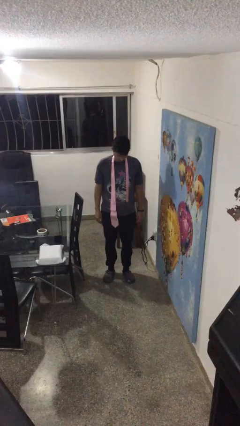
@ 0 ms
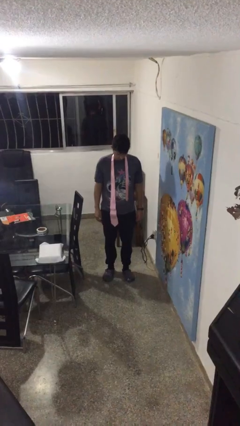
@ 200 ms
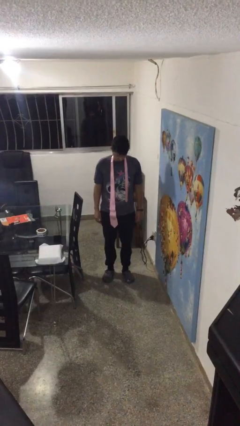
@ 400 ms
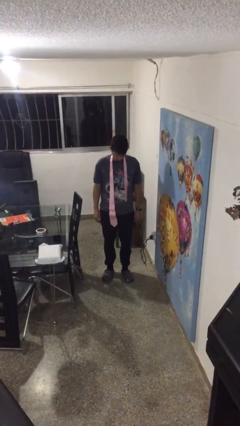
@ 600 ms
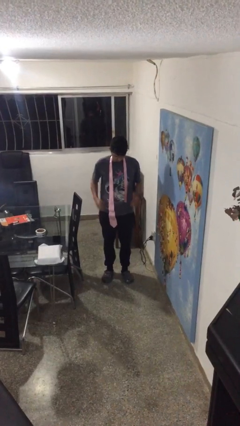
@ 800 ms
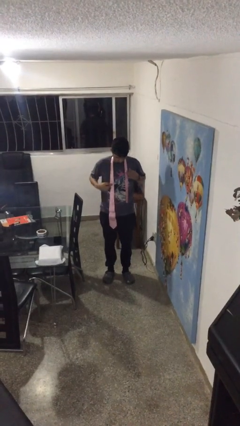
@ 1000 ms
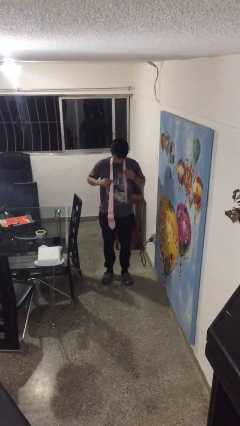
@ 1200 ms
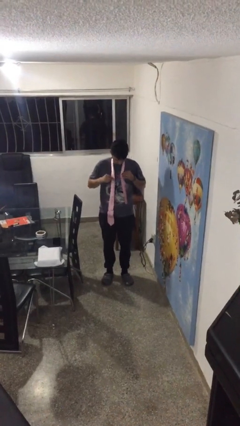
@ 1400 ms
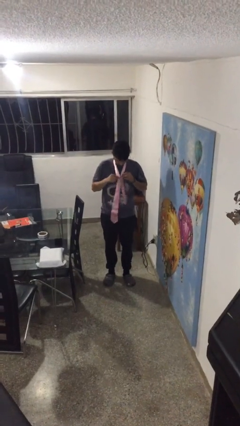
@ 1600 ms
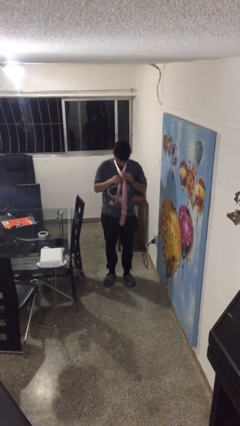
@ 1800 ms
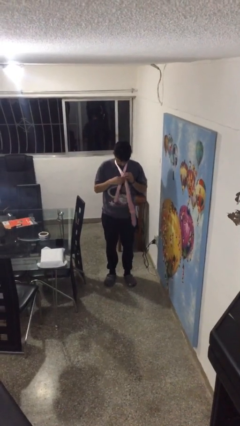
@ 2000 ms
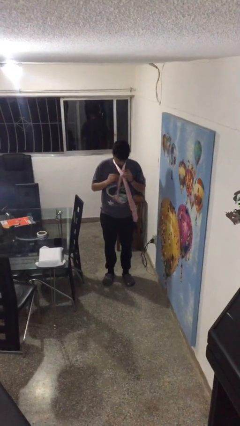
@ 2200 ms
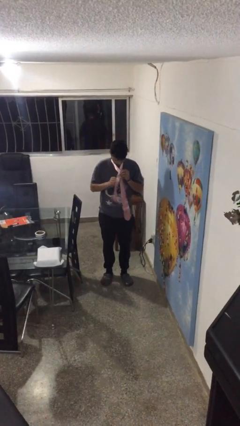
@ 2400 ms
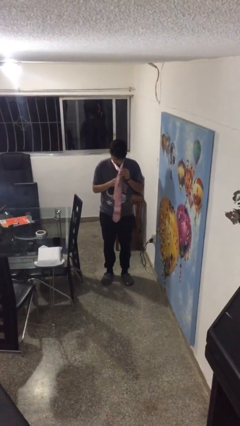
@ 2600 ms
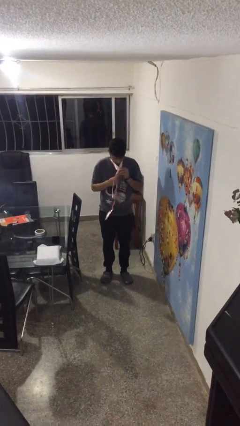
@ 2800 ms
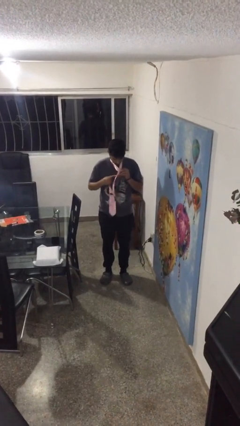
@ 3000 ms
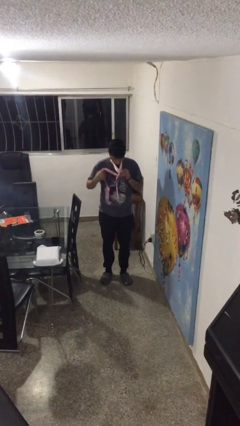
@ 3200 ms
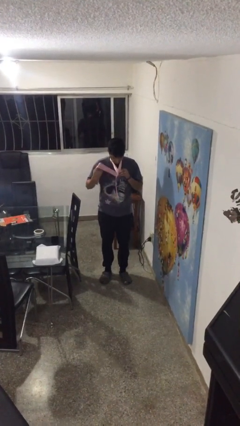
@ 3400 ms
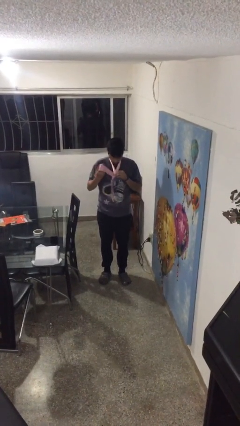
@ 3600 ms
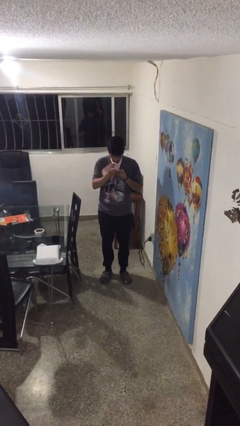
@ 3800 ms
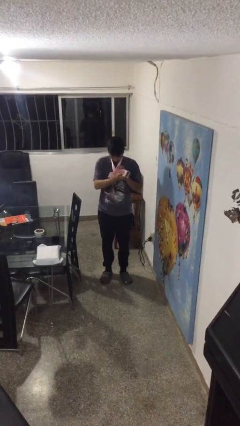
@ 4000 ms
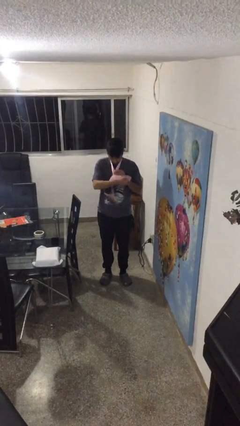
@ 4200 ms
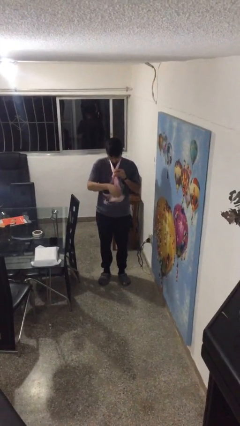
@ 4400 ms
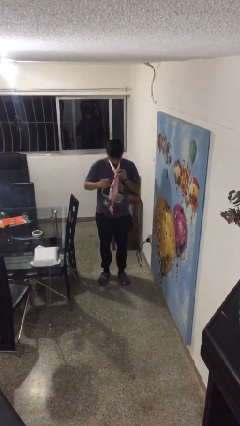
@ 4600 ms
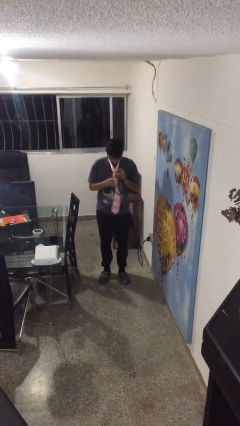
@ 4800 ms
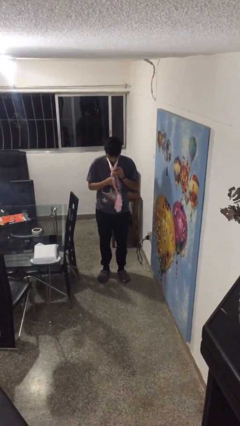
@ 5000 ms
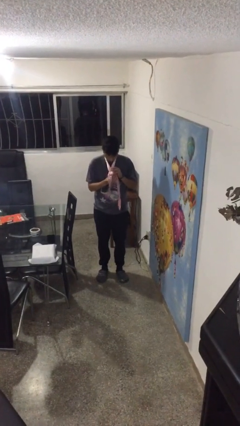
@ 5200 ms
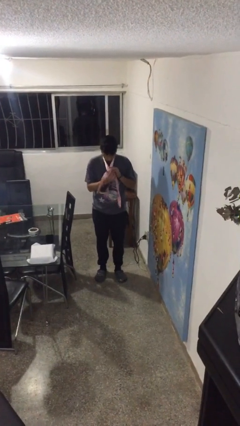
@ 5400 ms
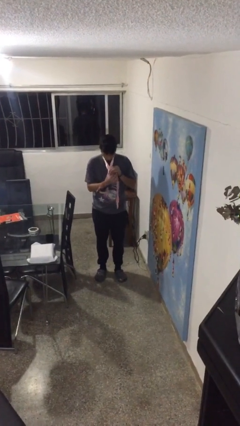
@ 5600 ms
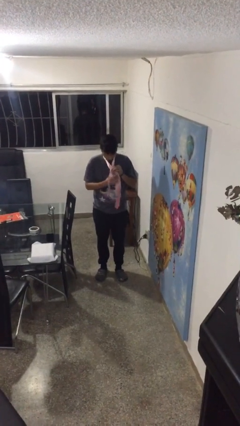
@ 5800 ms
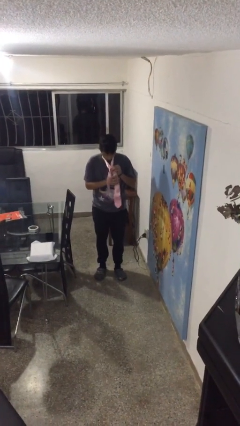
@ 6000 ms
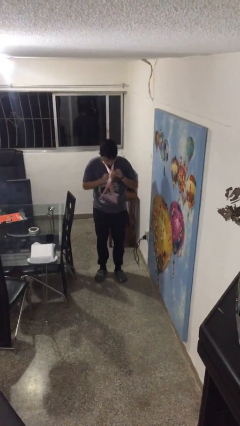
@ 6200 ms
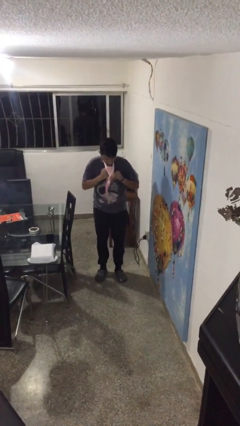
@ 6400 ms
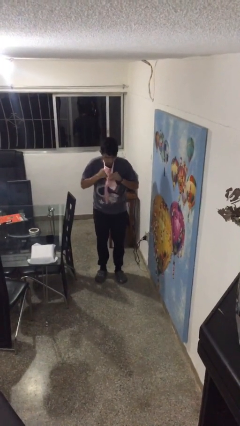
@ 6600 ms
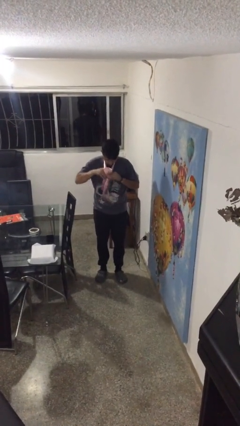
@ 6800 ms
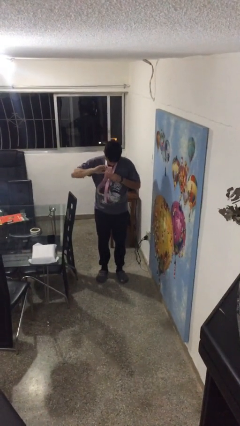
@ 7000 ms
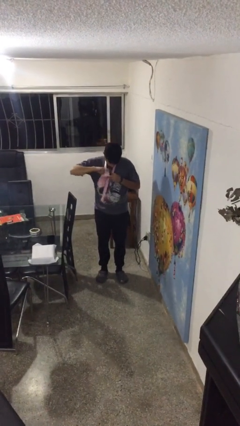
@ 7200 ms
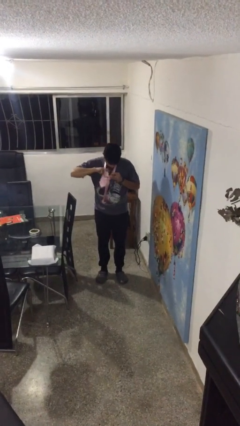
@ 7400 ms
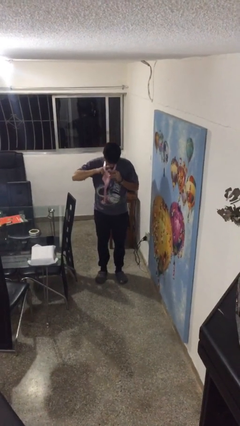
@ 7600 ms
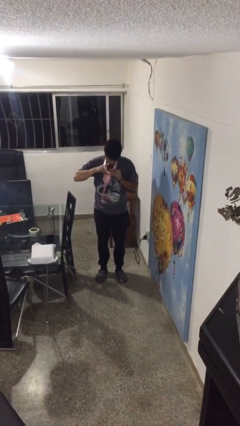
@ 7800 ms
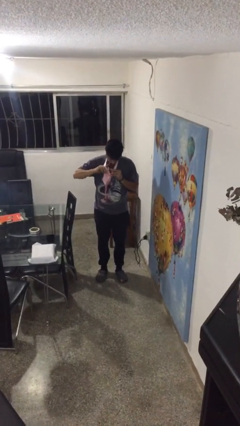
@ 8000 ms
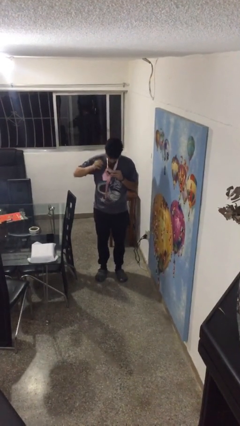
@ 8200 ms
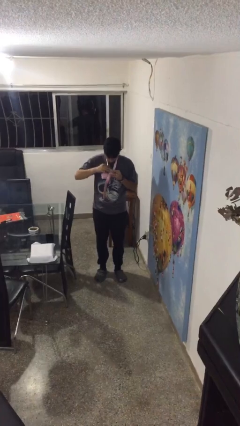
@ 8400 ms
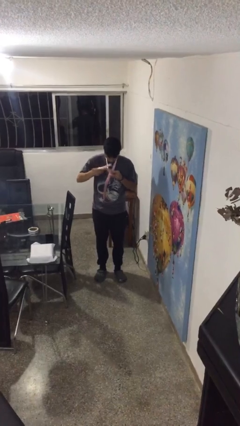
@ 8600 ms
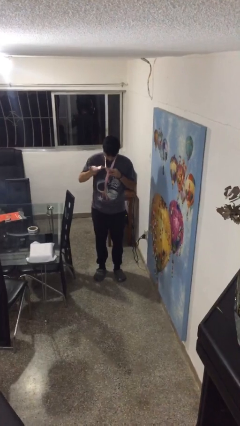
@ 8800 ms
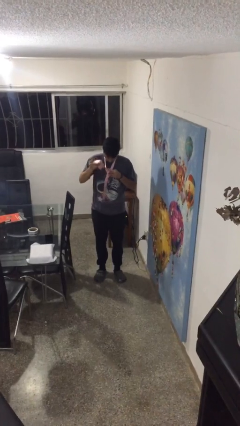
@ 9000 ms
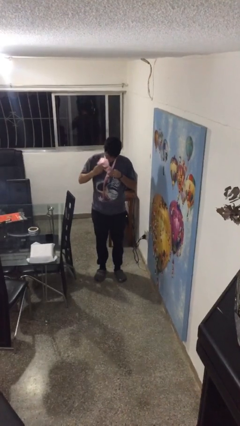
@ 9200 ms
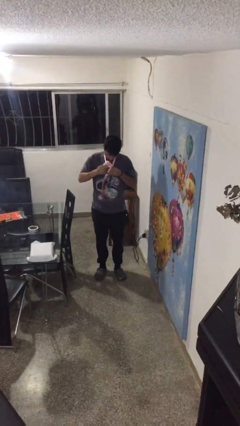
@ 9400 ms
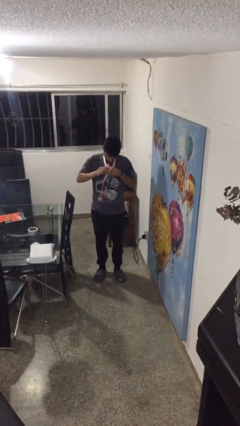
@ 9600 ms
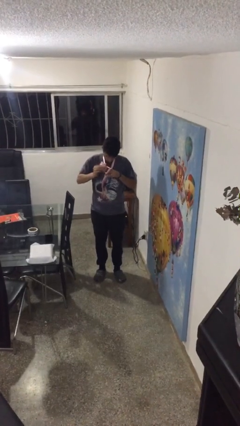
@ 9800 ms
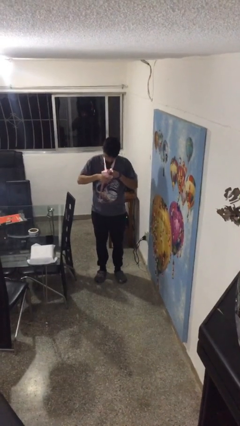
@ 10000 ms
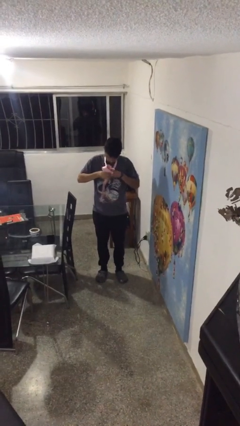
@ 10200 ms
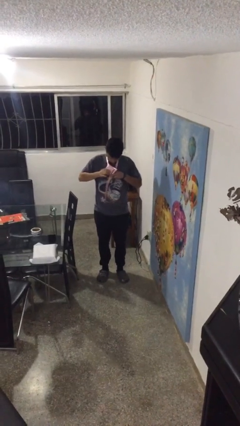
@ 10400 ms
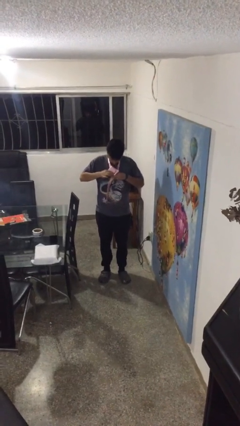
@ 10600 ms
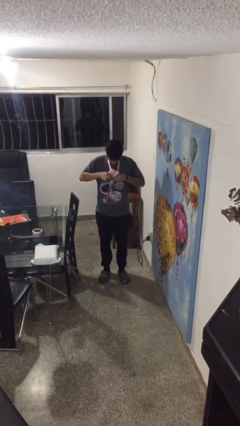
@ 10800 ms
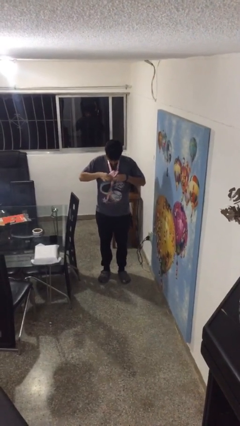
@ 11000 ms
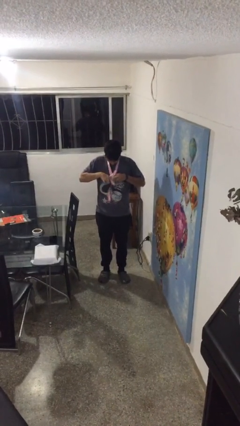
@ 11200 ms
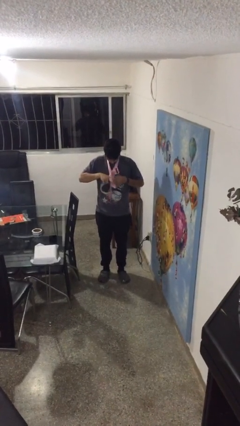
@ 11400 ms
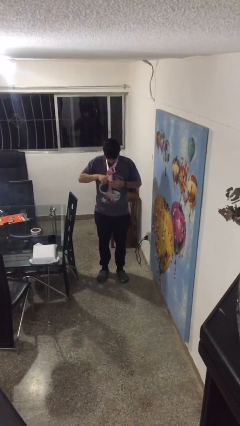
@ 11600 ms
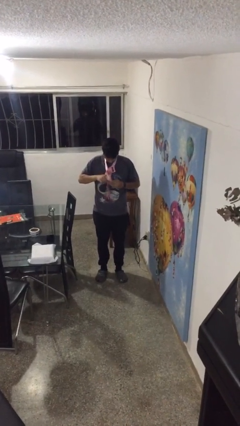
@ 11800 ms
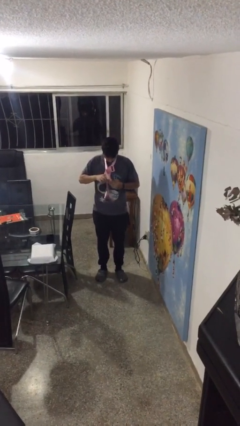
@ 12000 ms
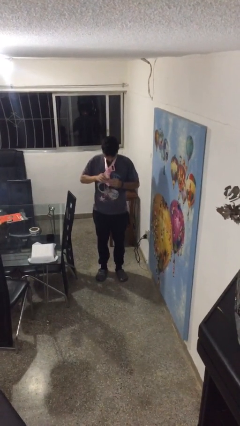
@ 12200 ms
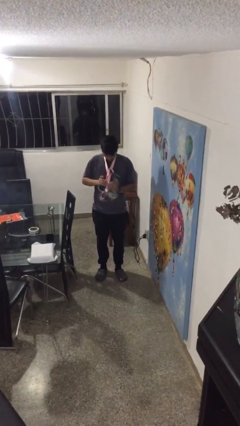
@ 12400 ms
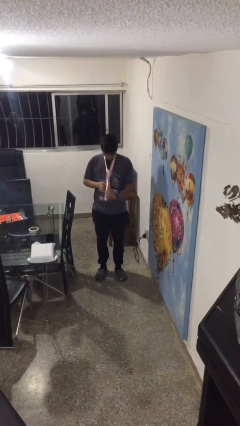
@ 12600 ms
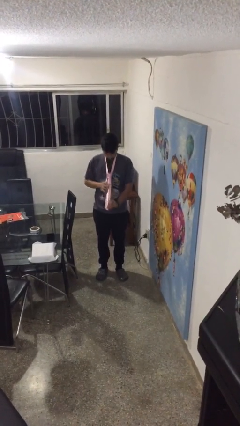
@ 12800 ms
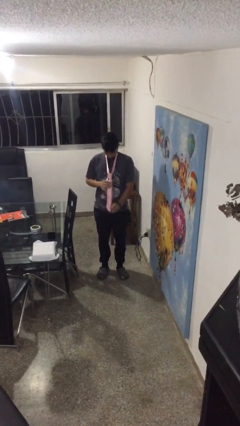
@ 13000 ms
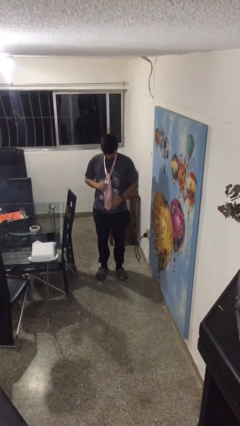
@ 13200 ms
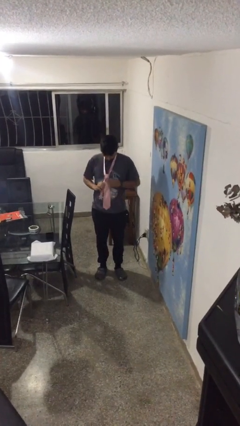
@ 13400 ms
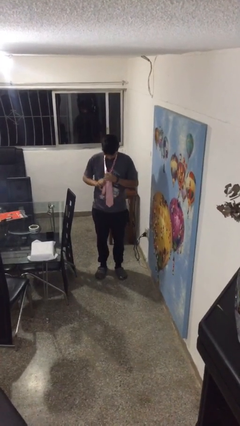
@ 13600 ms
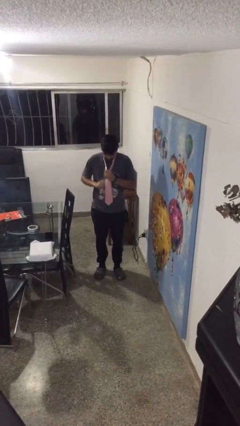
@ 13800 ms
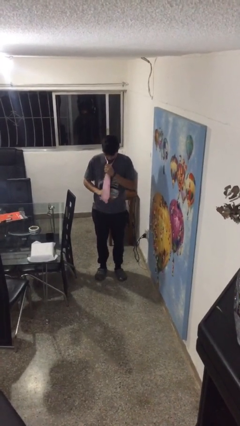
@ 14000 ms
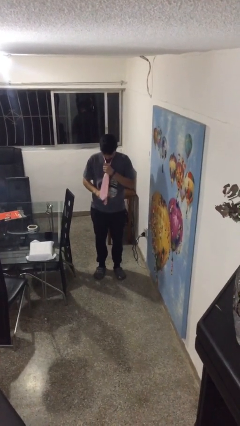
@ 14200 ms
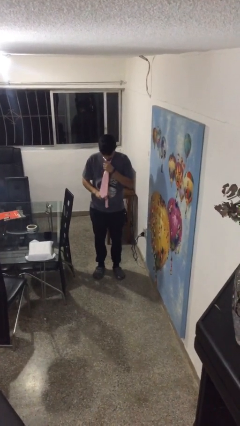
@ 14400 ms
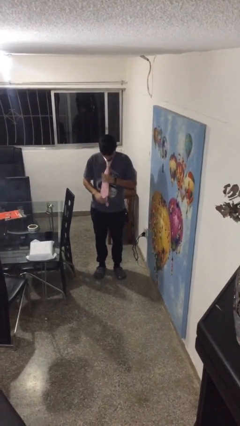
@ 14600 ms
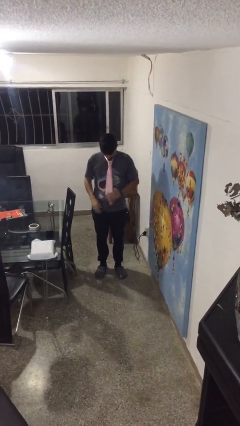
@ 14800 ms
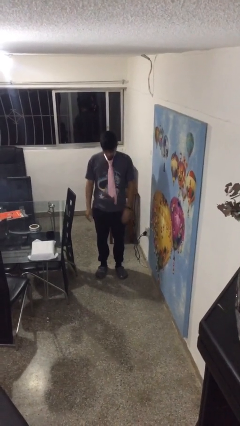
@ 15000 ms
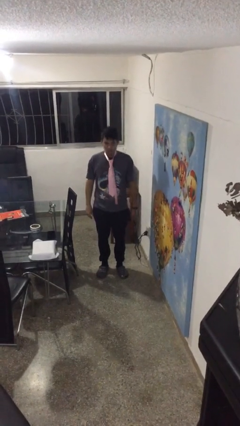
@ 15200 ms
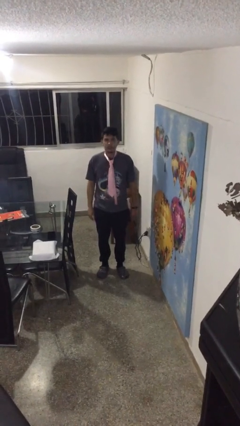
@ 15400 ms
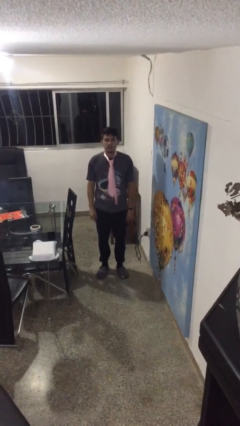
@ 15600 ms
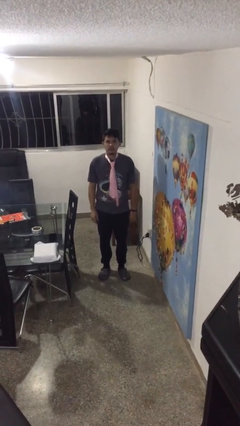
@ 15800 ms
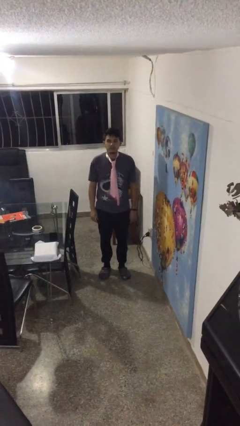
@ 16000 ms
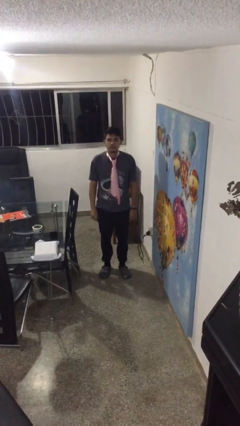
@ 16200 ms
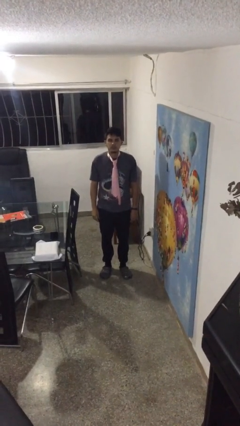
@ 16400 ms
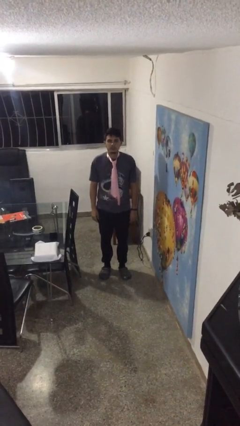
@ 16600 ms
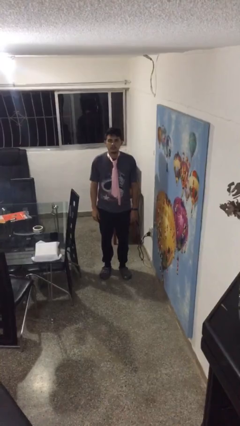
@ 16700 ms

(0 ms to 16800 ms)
person puts on necktie

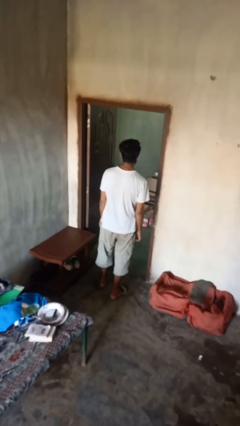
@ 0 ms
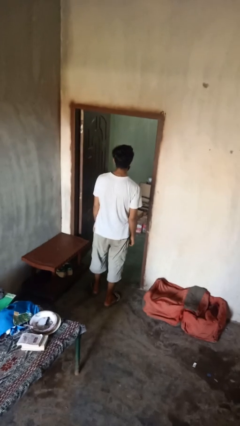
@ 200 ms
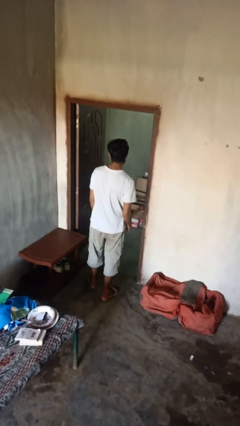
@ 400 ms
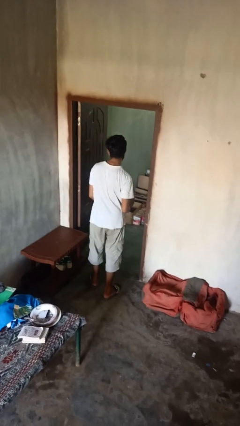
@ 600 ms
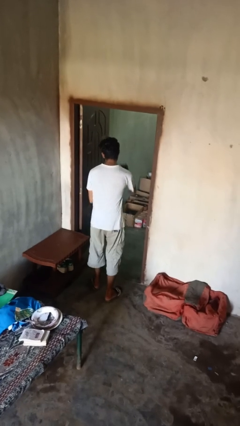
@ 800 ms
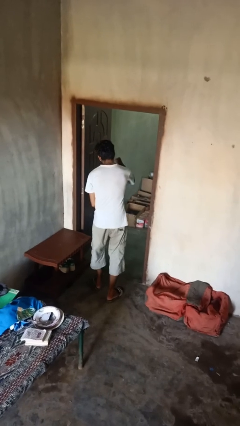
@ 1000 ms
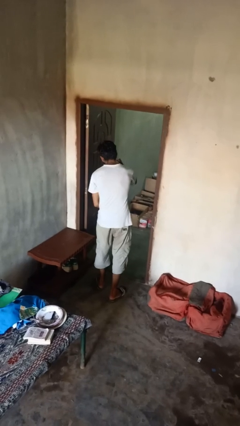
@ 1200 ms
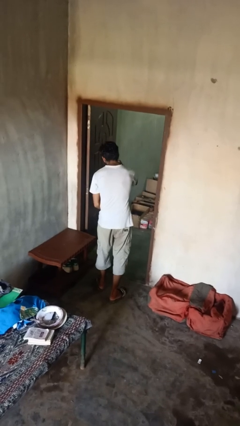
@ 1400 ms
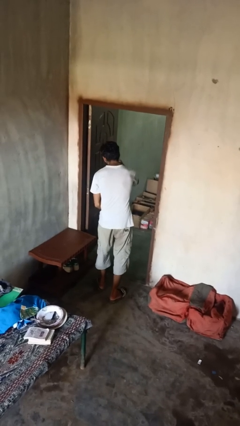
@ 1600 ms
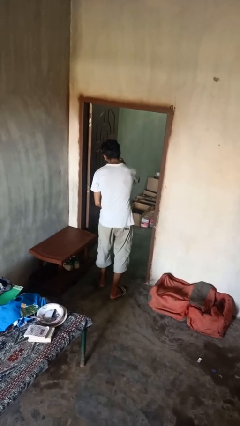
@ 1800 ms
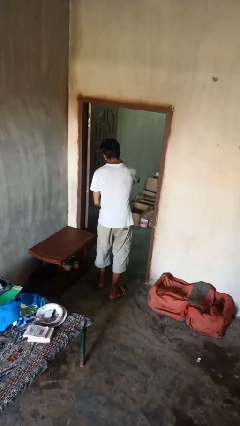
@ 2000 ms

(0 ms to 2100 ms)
person punches
